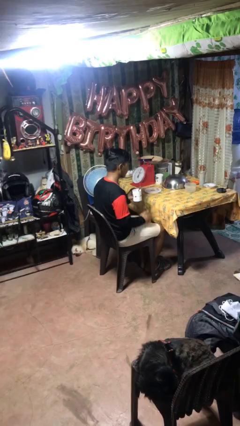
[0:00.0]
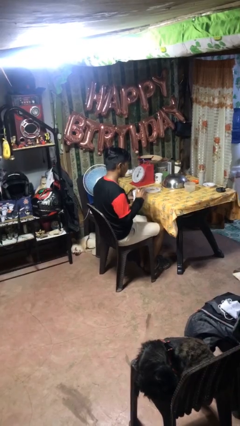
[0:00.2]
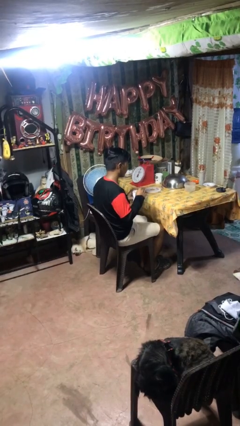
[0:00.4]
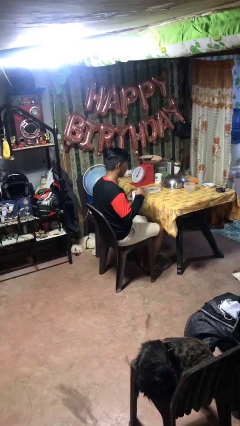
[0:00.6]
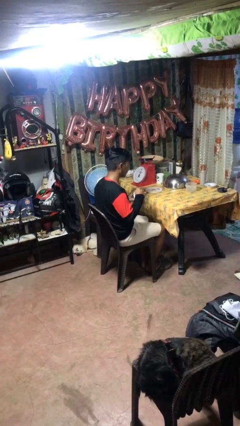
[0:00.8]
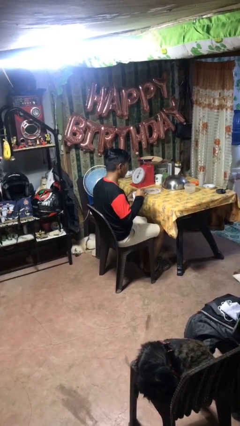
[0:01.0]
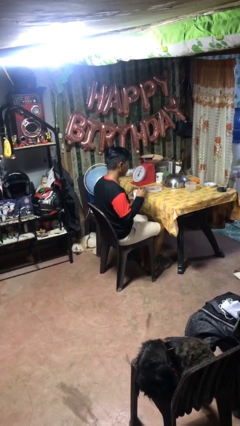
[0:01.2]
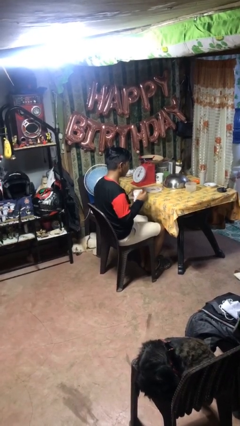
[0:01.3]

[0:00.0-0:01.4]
person stirs mug

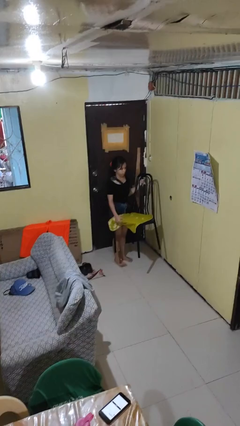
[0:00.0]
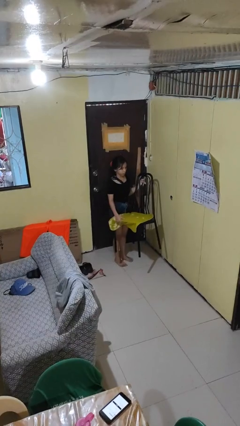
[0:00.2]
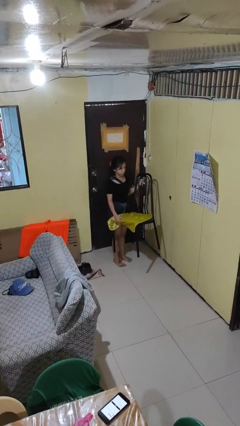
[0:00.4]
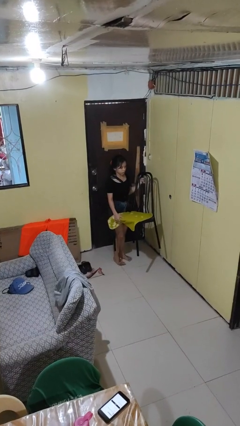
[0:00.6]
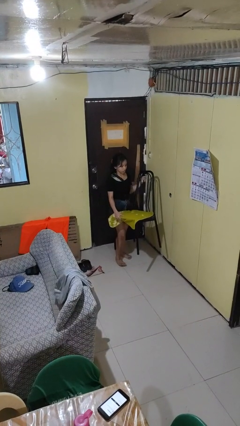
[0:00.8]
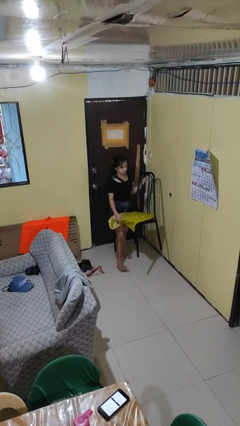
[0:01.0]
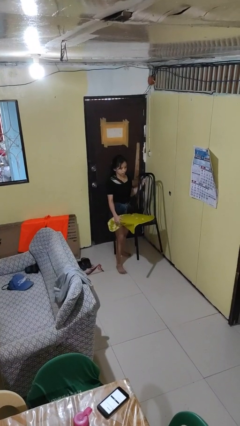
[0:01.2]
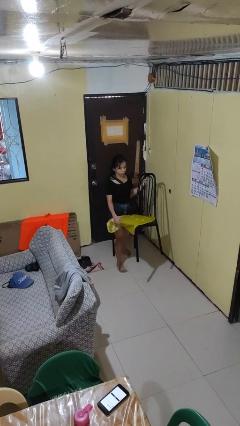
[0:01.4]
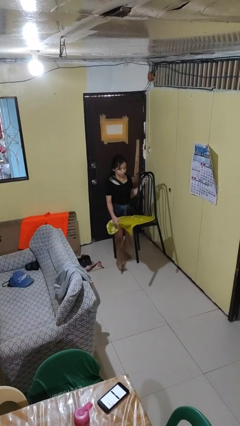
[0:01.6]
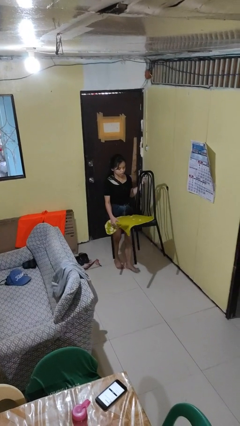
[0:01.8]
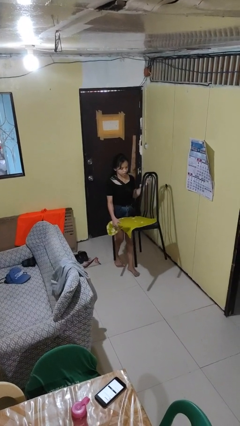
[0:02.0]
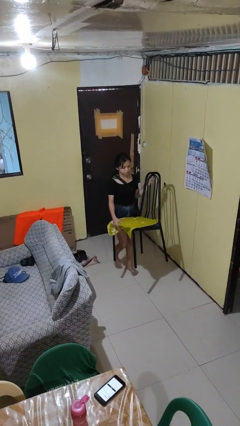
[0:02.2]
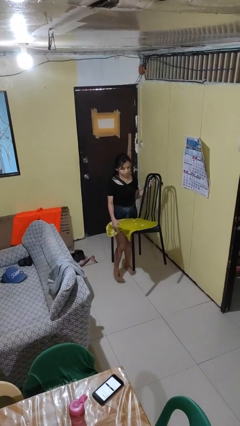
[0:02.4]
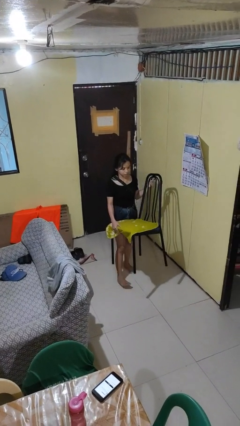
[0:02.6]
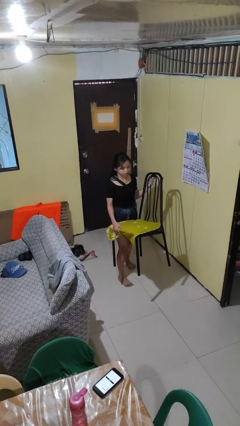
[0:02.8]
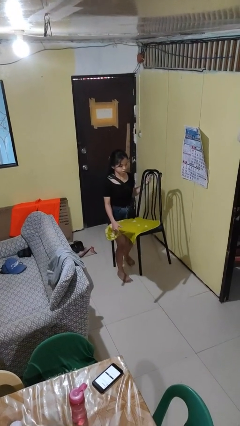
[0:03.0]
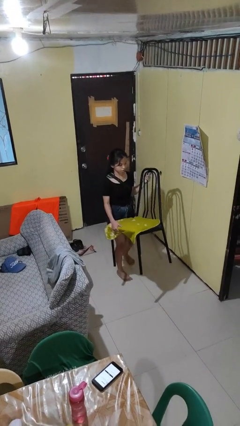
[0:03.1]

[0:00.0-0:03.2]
person carries furniture

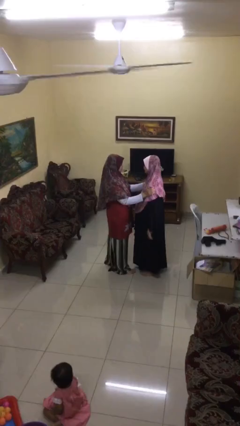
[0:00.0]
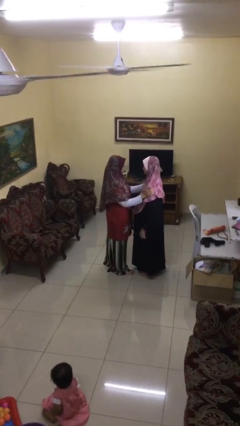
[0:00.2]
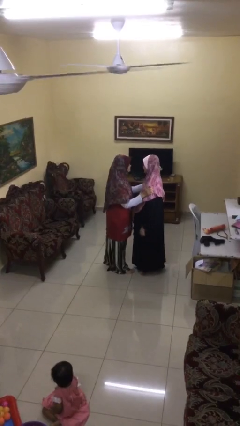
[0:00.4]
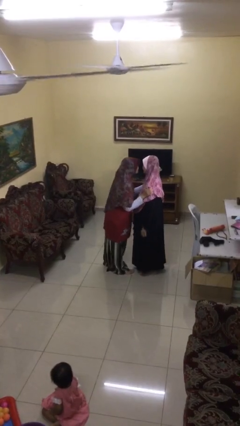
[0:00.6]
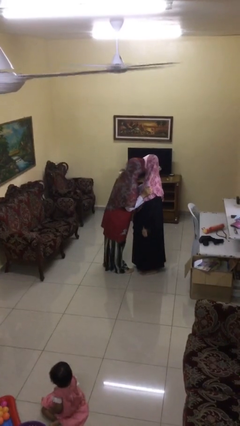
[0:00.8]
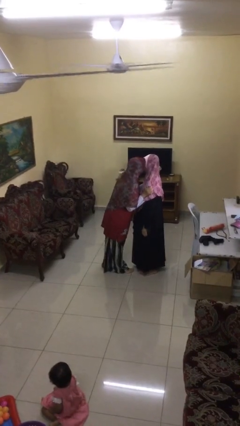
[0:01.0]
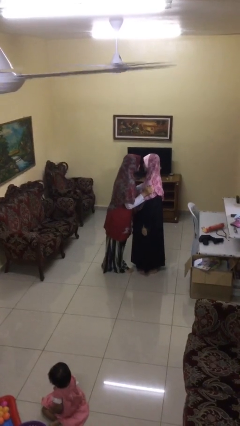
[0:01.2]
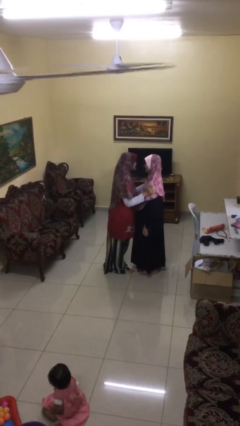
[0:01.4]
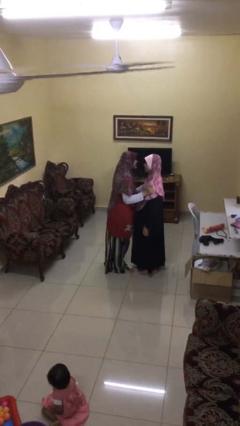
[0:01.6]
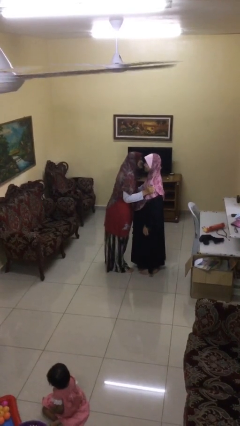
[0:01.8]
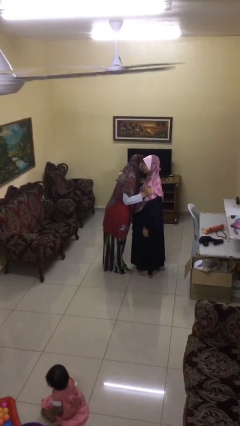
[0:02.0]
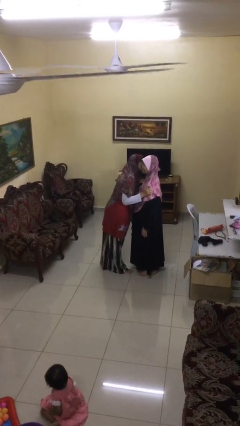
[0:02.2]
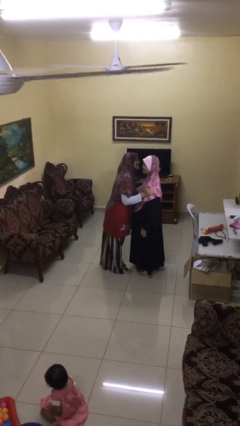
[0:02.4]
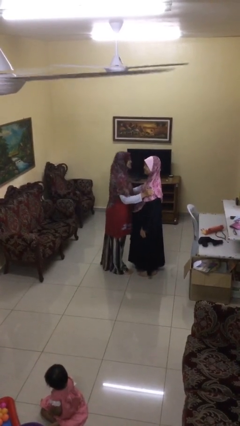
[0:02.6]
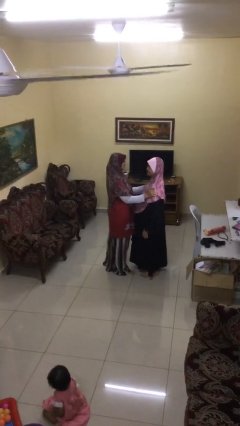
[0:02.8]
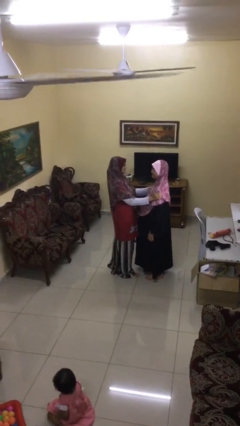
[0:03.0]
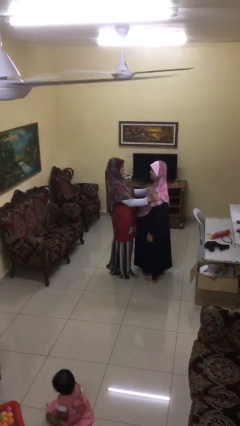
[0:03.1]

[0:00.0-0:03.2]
person kisses cheek of person

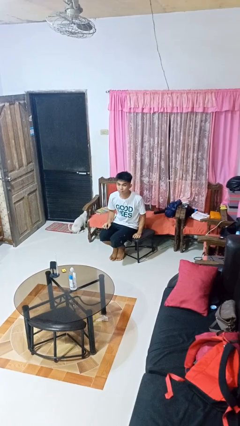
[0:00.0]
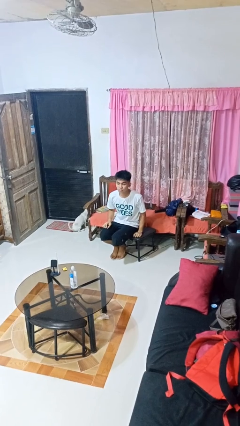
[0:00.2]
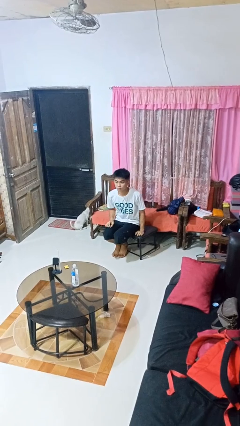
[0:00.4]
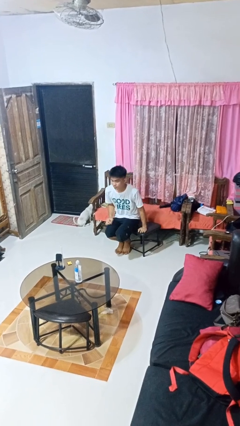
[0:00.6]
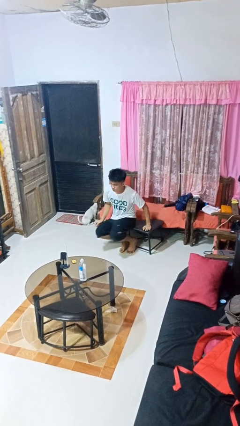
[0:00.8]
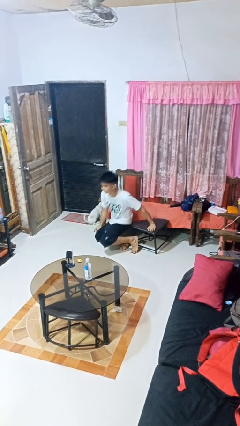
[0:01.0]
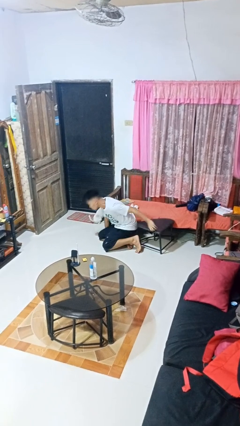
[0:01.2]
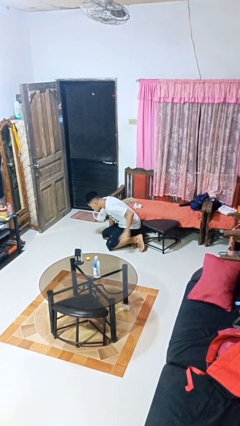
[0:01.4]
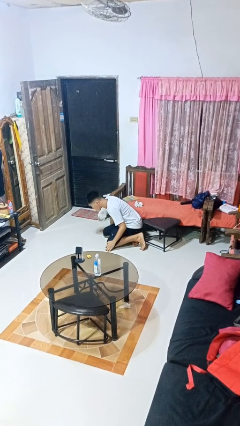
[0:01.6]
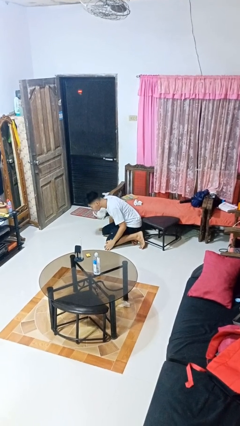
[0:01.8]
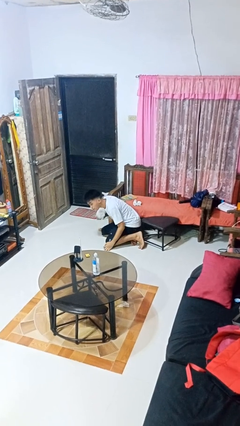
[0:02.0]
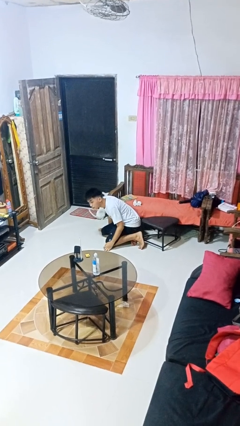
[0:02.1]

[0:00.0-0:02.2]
person falls from chair

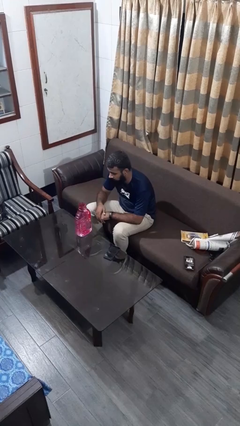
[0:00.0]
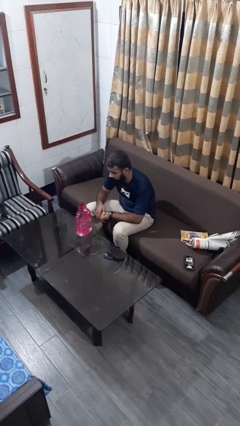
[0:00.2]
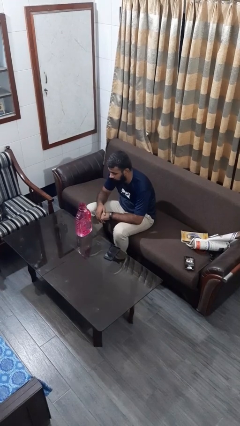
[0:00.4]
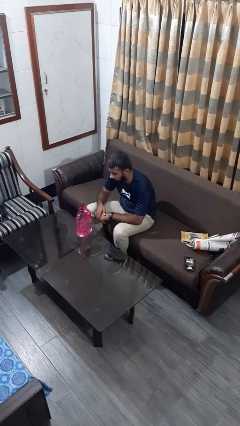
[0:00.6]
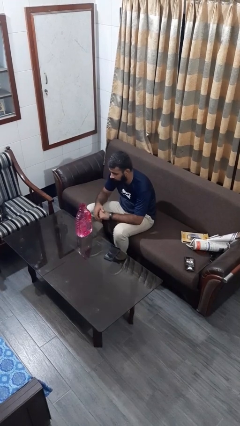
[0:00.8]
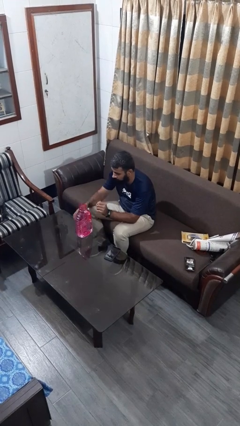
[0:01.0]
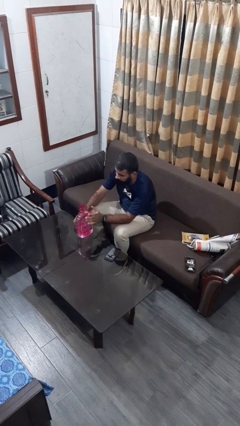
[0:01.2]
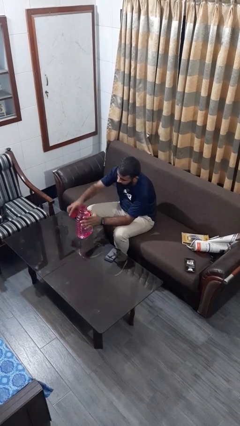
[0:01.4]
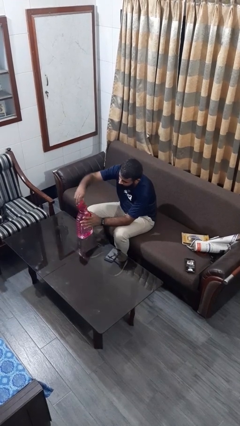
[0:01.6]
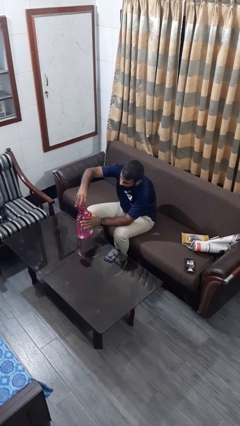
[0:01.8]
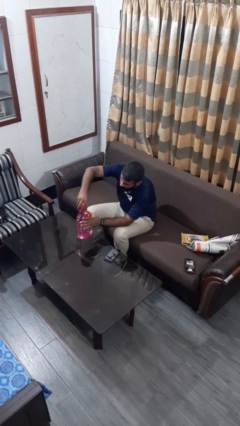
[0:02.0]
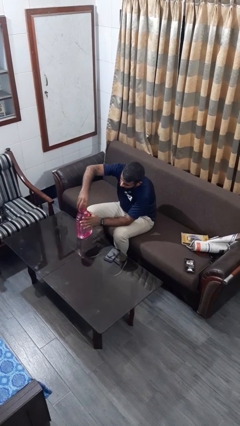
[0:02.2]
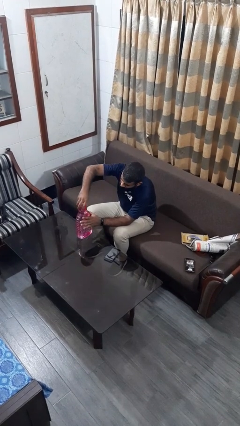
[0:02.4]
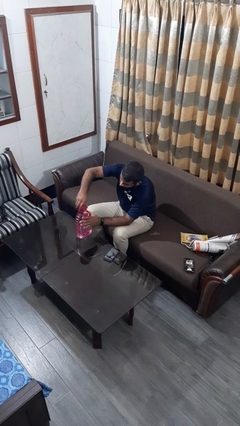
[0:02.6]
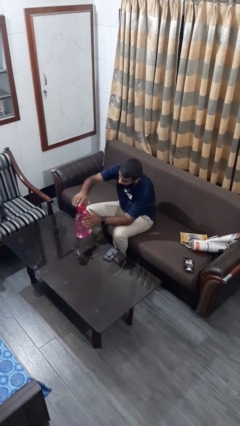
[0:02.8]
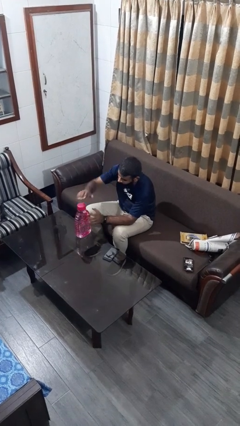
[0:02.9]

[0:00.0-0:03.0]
person screws lid to bottle

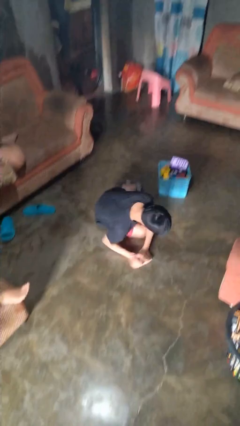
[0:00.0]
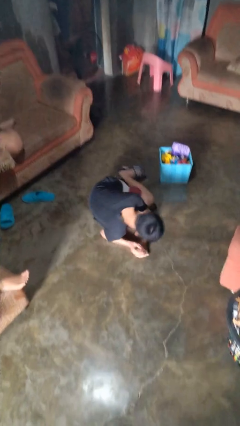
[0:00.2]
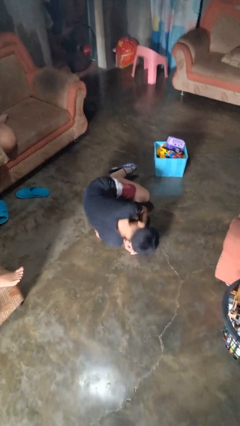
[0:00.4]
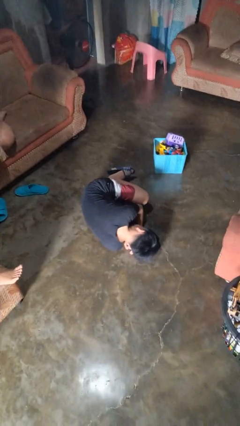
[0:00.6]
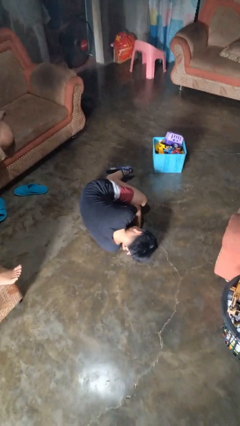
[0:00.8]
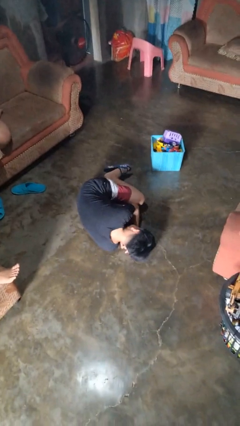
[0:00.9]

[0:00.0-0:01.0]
person lies down on floor

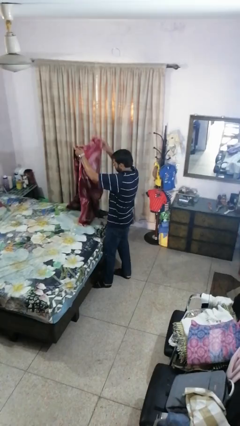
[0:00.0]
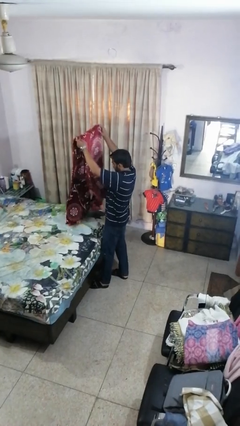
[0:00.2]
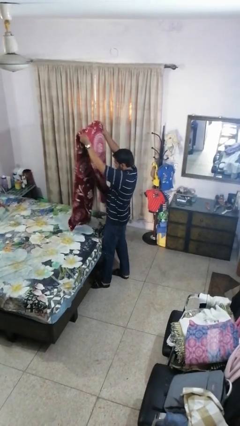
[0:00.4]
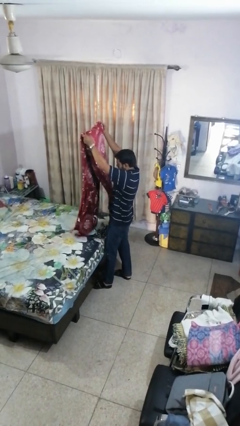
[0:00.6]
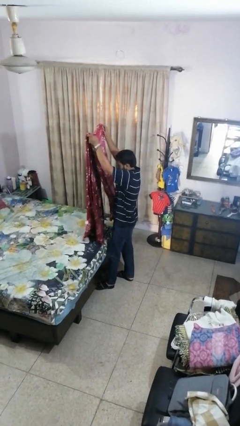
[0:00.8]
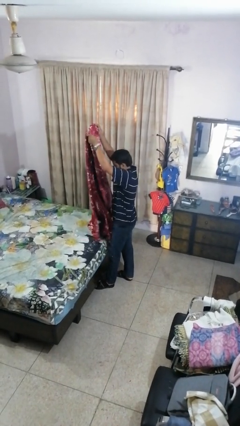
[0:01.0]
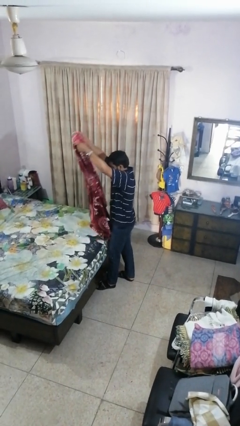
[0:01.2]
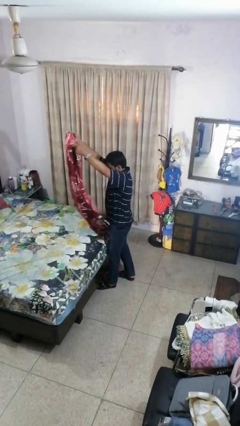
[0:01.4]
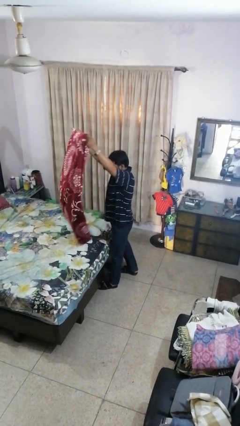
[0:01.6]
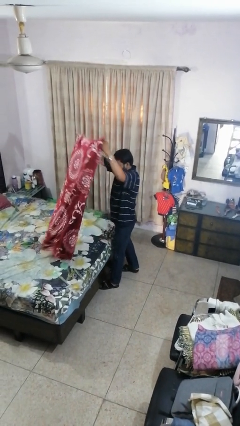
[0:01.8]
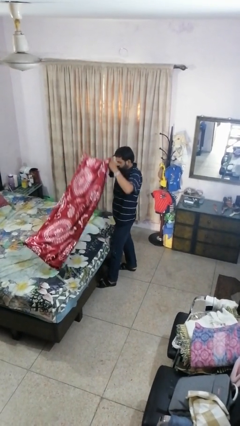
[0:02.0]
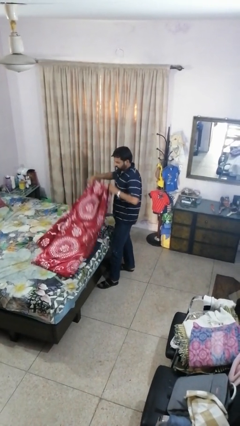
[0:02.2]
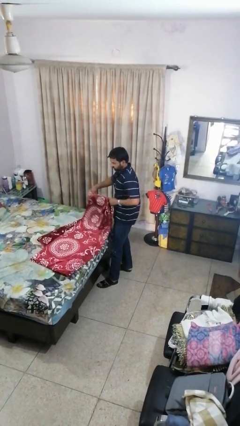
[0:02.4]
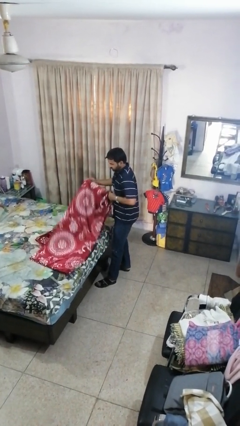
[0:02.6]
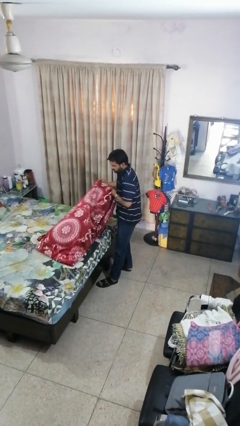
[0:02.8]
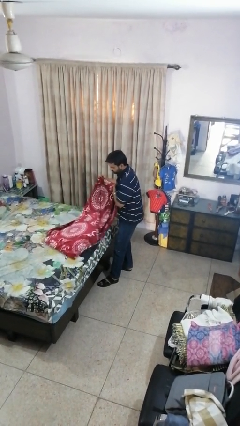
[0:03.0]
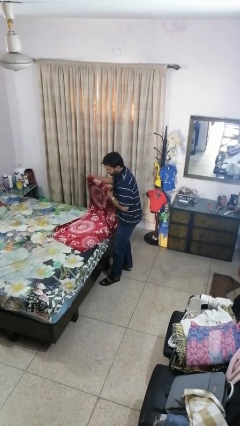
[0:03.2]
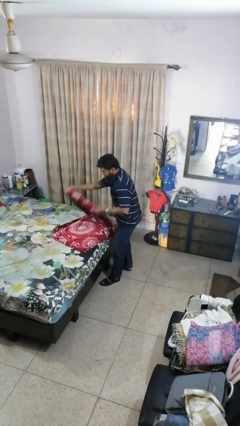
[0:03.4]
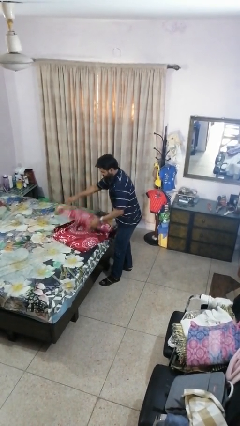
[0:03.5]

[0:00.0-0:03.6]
person crumples paper
